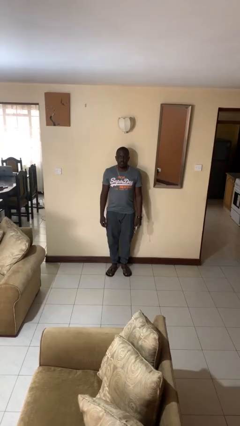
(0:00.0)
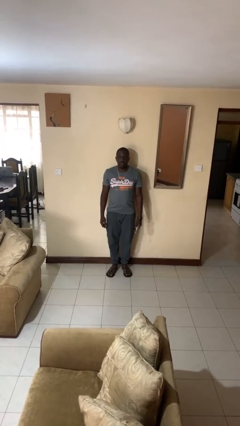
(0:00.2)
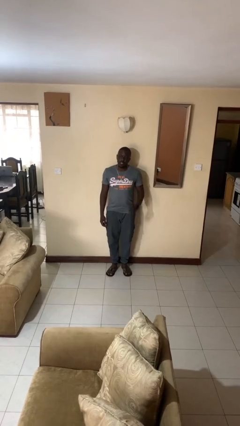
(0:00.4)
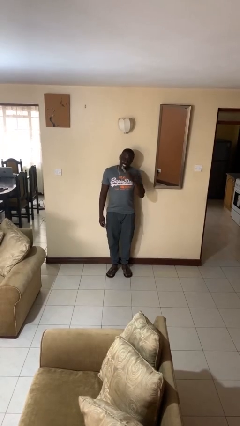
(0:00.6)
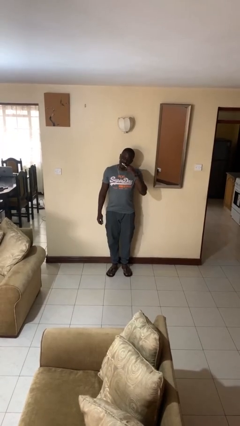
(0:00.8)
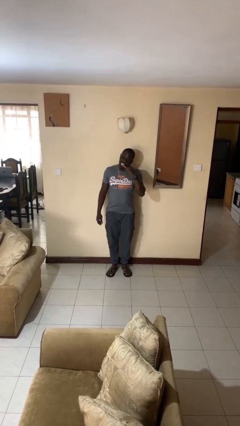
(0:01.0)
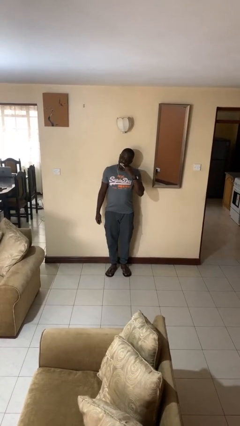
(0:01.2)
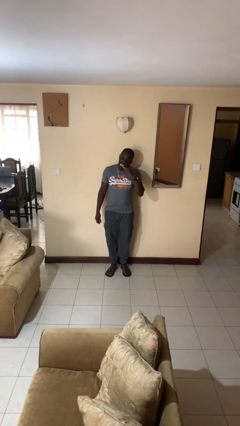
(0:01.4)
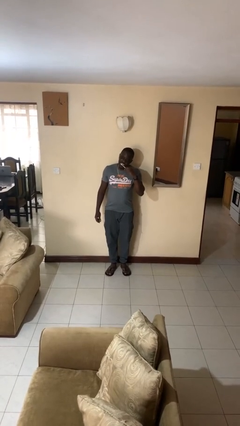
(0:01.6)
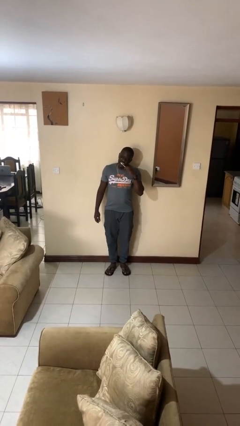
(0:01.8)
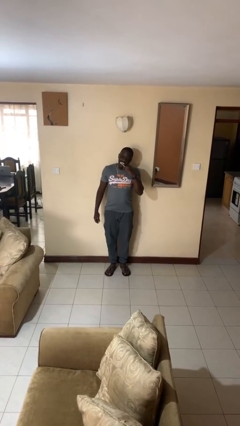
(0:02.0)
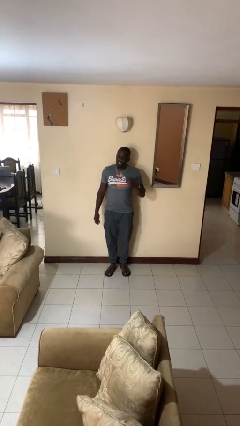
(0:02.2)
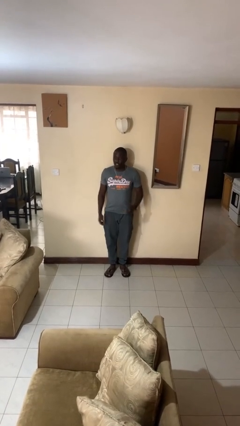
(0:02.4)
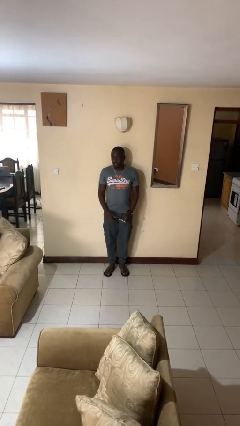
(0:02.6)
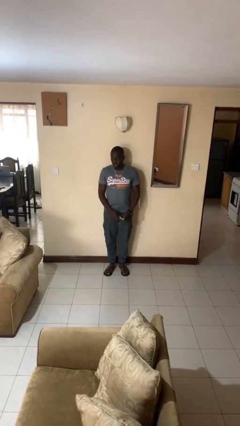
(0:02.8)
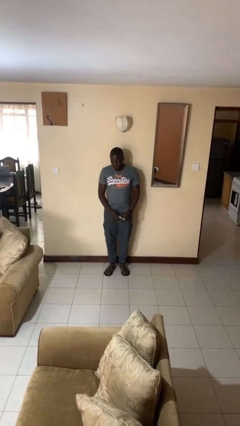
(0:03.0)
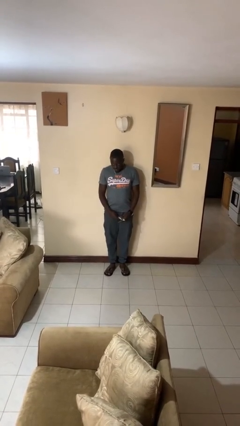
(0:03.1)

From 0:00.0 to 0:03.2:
person brushes teeth

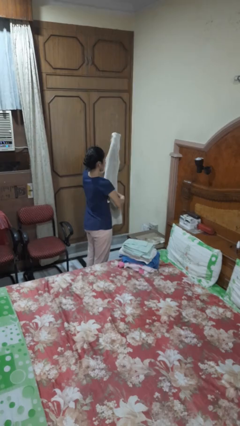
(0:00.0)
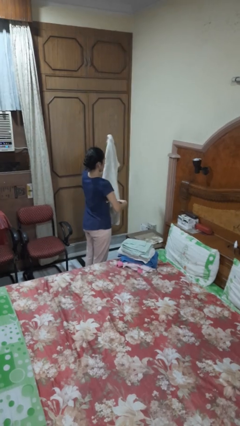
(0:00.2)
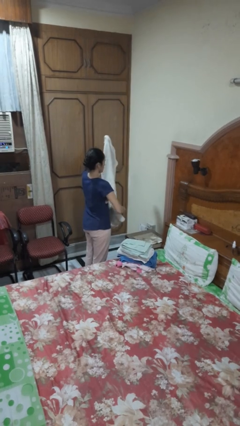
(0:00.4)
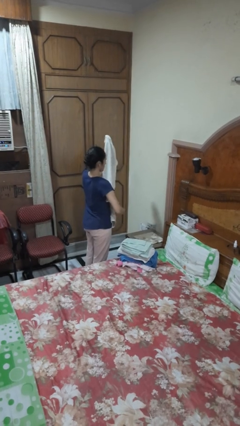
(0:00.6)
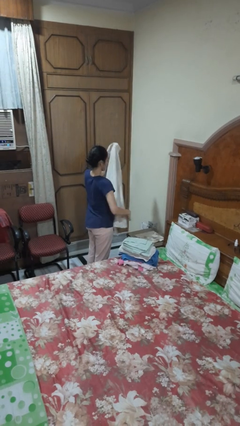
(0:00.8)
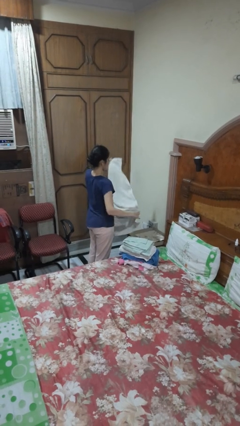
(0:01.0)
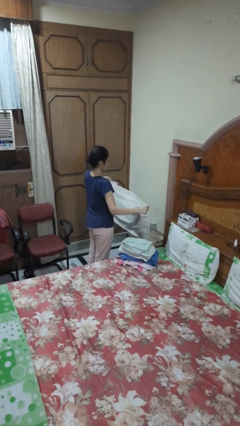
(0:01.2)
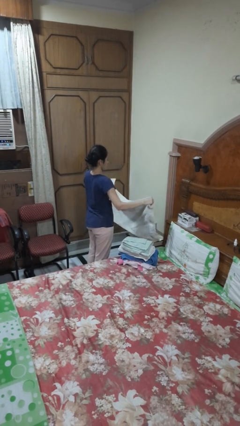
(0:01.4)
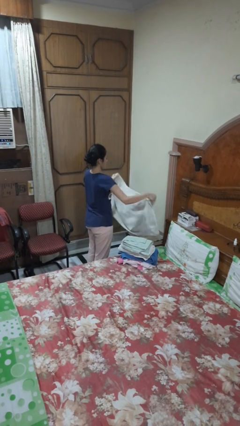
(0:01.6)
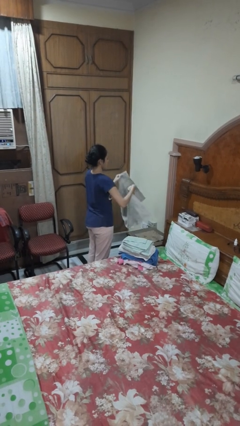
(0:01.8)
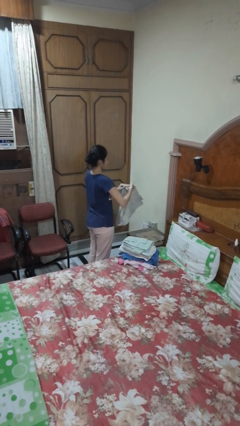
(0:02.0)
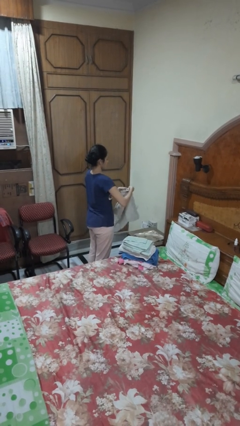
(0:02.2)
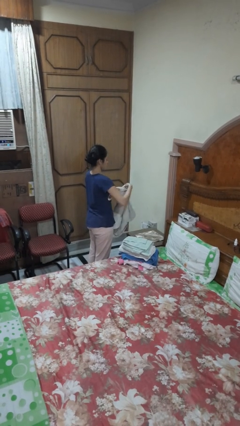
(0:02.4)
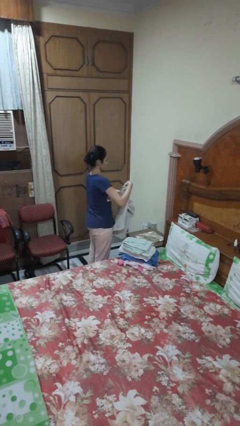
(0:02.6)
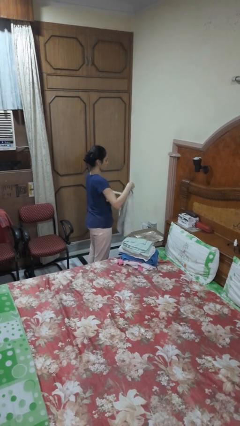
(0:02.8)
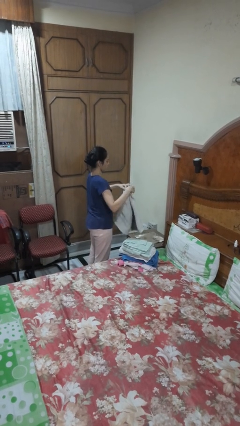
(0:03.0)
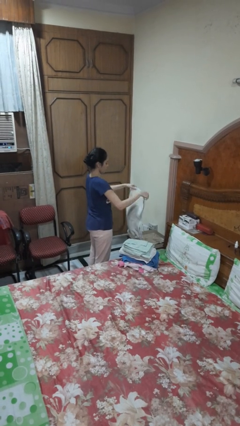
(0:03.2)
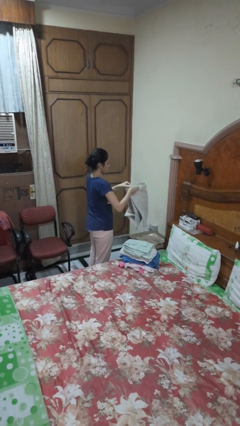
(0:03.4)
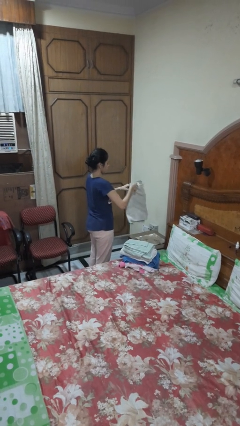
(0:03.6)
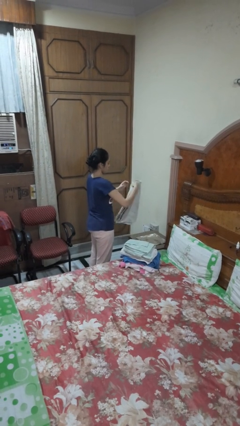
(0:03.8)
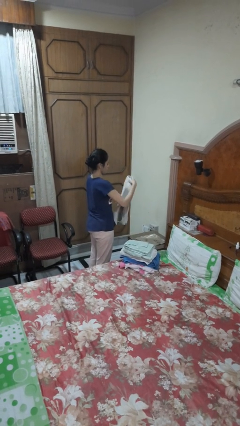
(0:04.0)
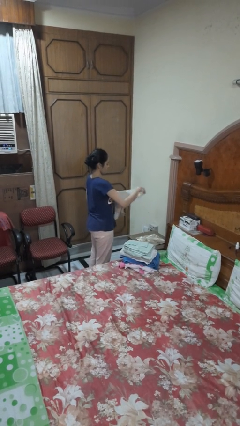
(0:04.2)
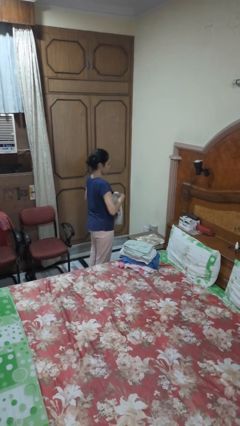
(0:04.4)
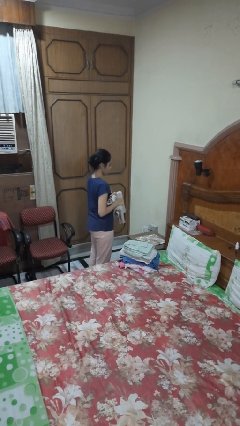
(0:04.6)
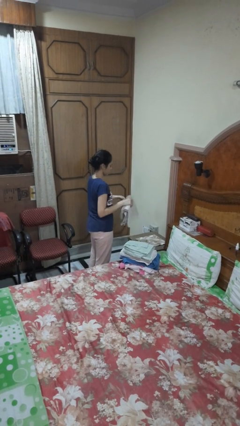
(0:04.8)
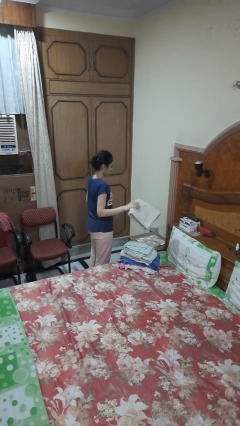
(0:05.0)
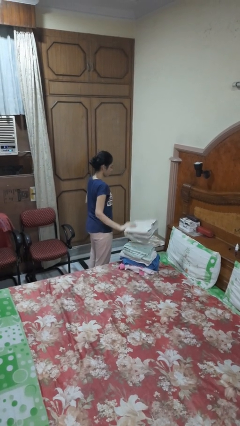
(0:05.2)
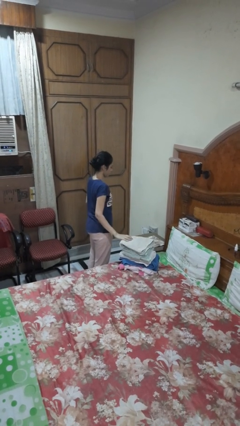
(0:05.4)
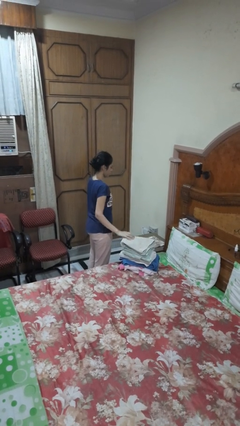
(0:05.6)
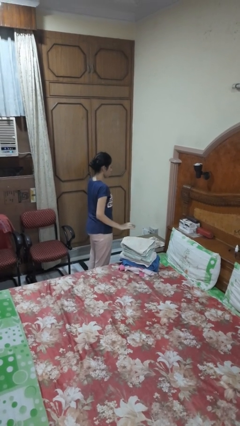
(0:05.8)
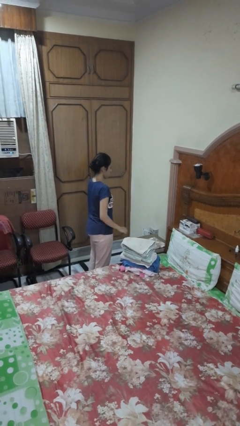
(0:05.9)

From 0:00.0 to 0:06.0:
person folds towel

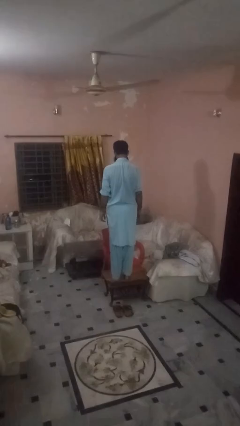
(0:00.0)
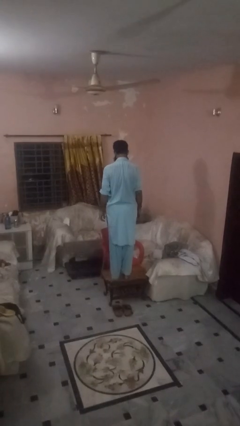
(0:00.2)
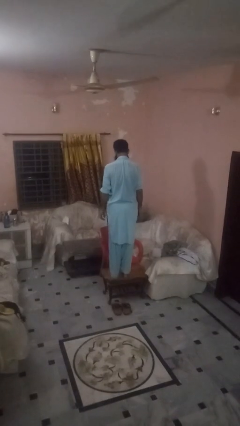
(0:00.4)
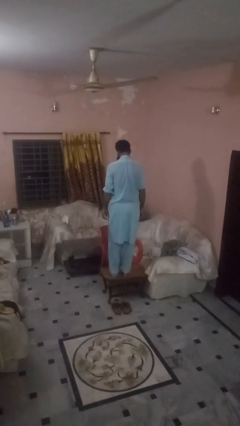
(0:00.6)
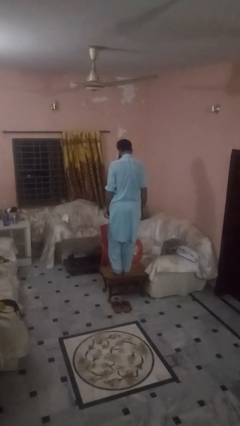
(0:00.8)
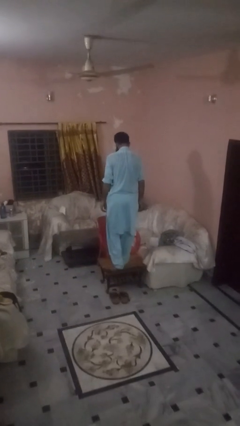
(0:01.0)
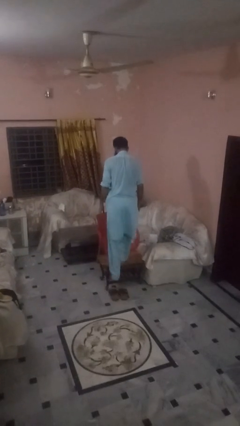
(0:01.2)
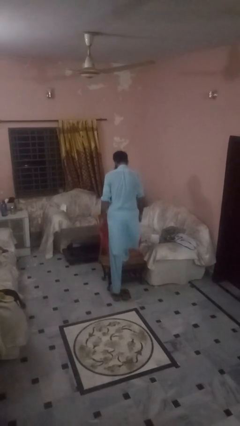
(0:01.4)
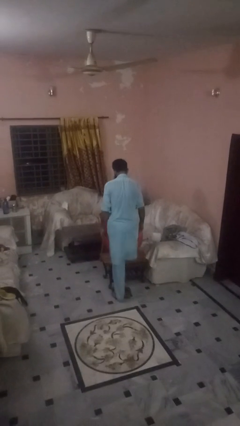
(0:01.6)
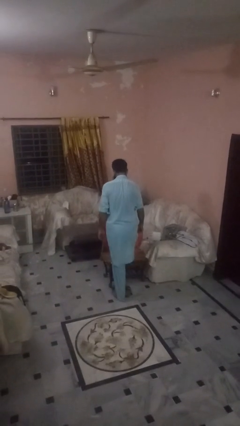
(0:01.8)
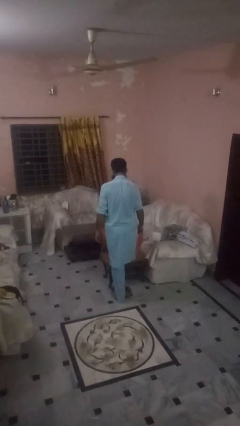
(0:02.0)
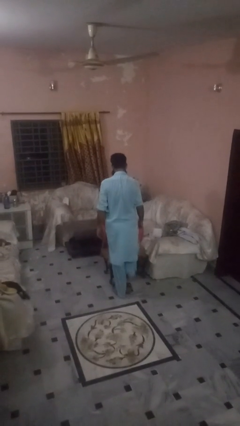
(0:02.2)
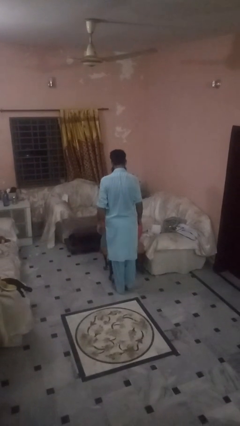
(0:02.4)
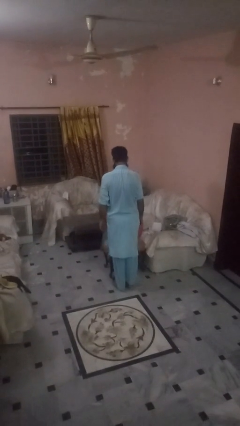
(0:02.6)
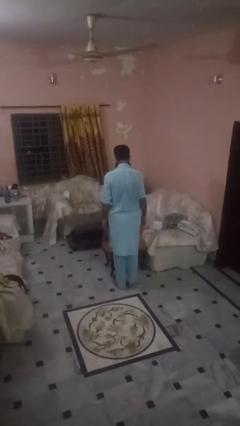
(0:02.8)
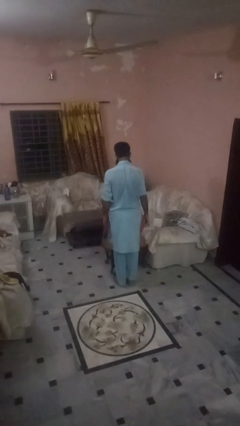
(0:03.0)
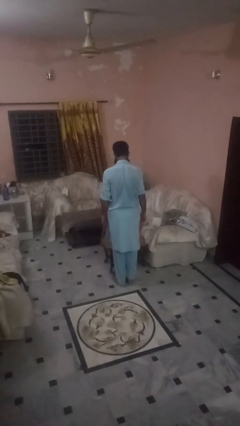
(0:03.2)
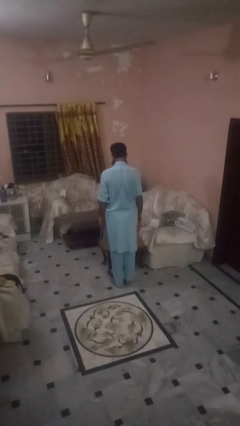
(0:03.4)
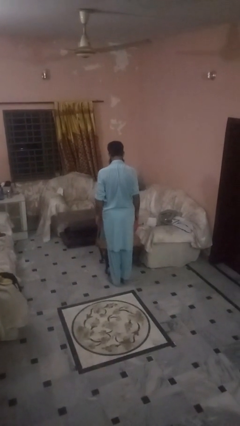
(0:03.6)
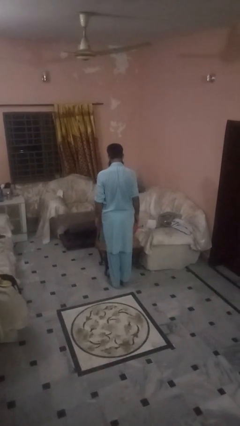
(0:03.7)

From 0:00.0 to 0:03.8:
person climbs off table

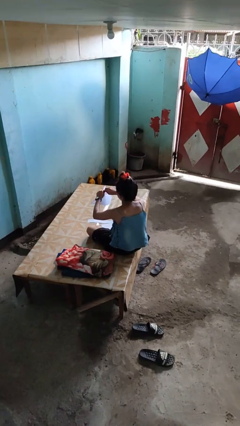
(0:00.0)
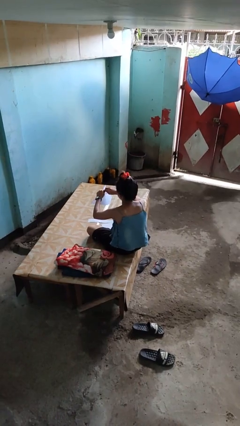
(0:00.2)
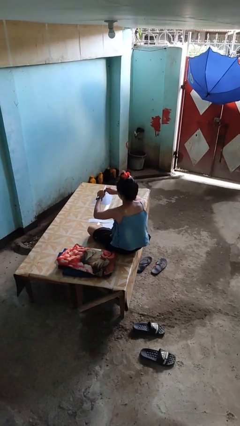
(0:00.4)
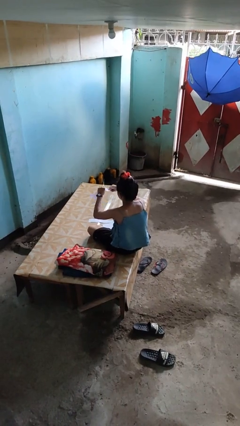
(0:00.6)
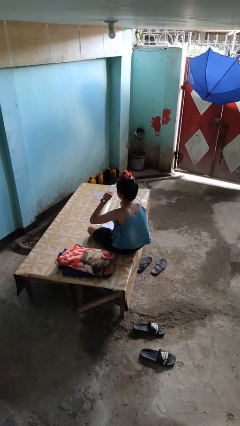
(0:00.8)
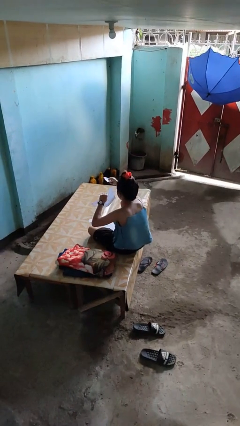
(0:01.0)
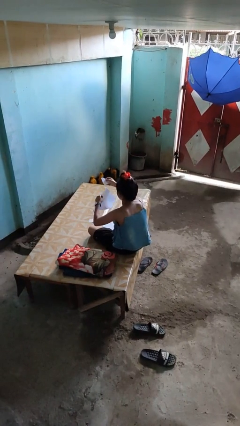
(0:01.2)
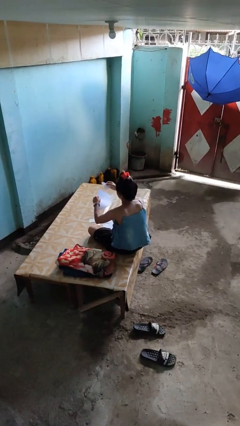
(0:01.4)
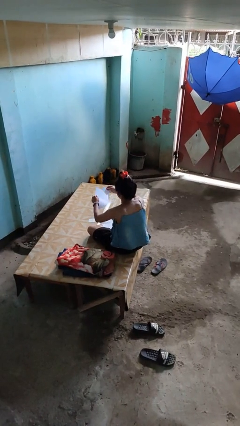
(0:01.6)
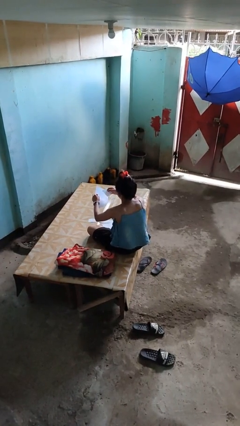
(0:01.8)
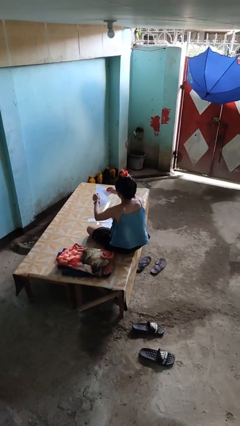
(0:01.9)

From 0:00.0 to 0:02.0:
person tears paper

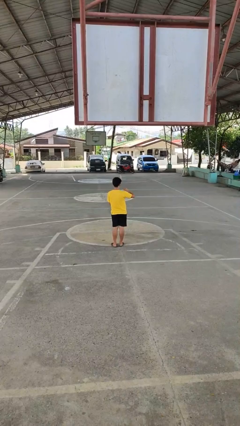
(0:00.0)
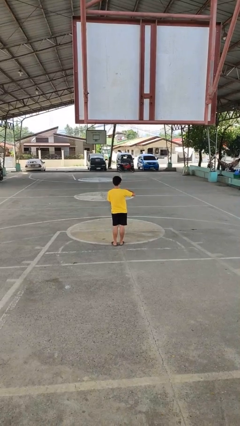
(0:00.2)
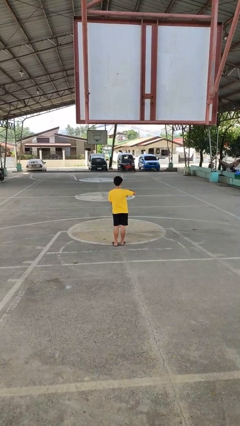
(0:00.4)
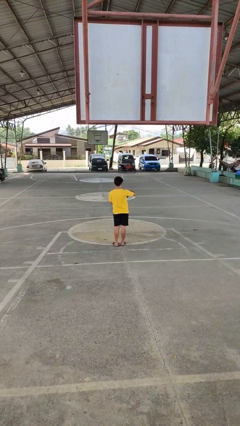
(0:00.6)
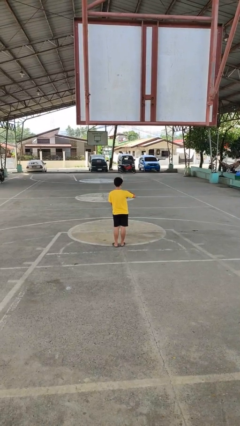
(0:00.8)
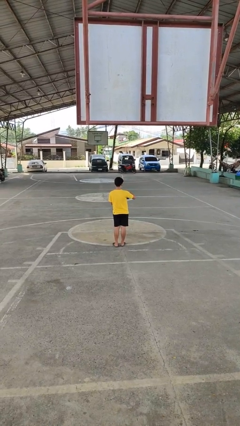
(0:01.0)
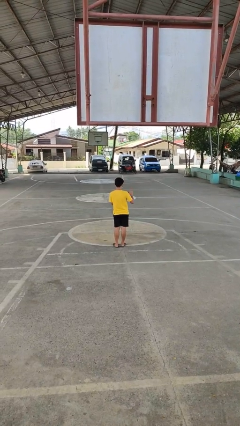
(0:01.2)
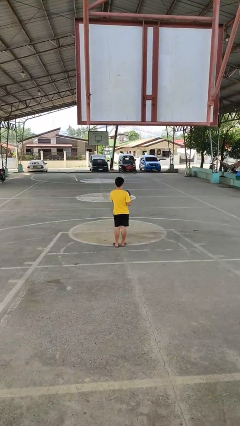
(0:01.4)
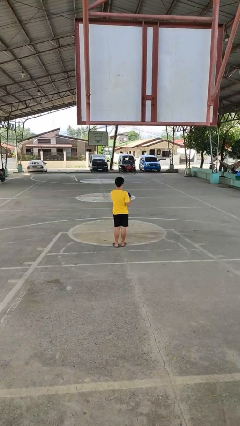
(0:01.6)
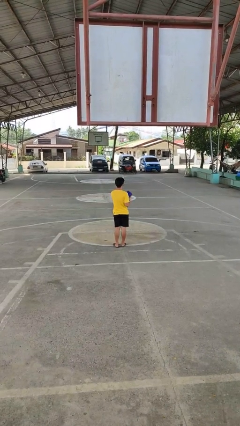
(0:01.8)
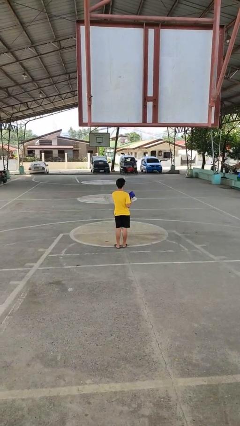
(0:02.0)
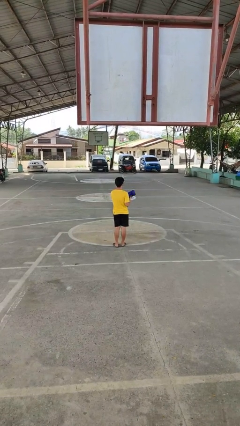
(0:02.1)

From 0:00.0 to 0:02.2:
person puts object into purse

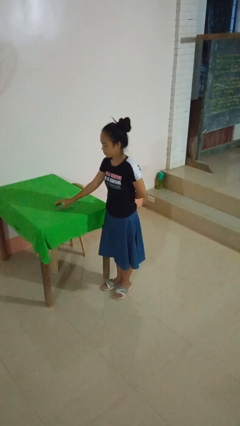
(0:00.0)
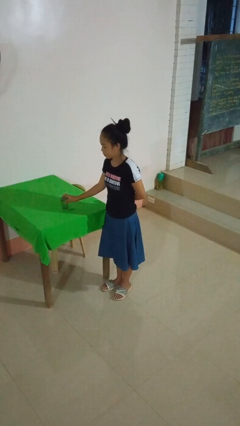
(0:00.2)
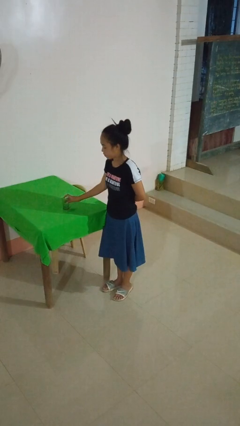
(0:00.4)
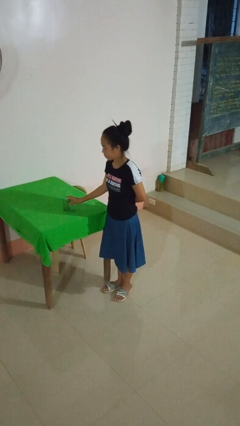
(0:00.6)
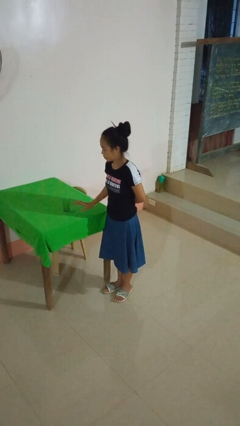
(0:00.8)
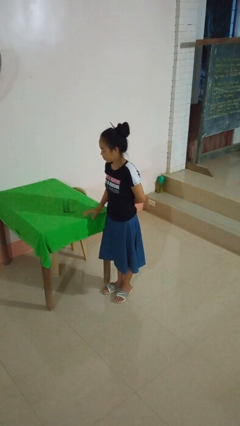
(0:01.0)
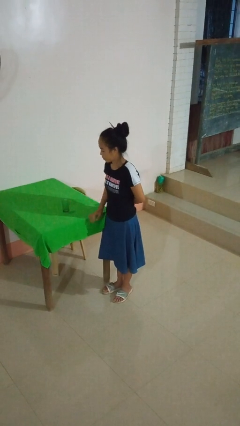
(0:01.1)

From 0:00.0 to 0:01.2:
person sets upright glass
